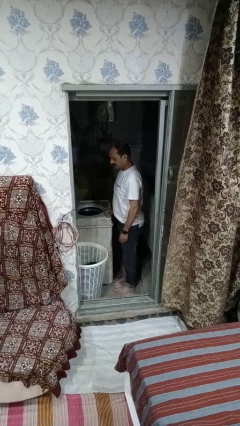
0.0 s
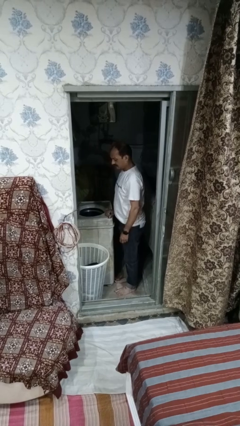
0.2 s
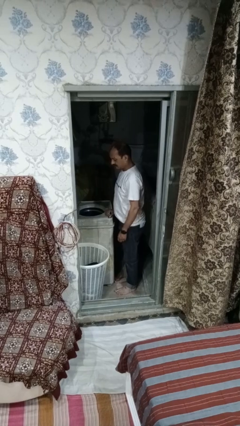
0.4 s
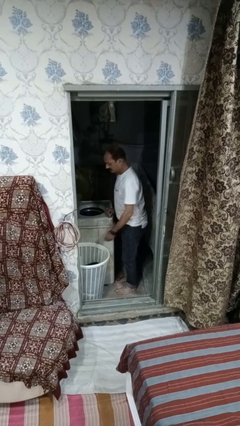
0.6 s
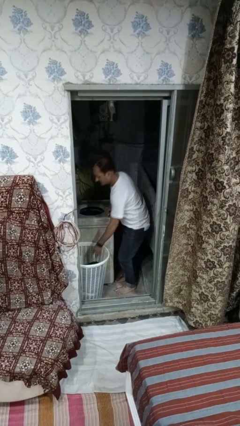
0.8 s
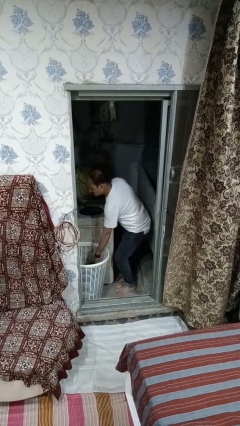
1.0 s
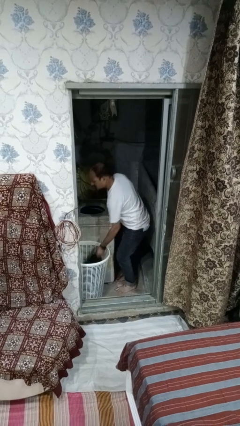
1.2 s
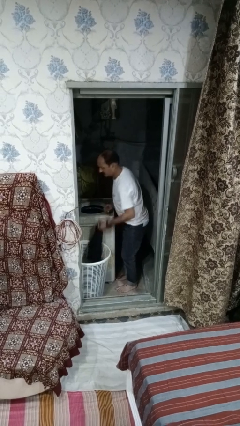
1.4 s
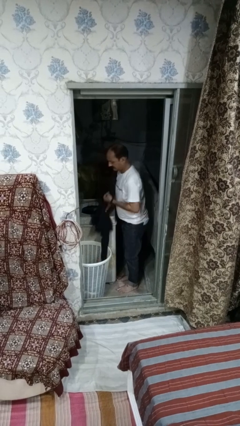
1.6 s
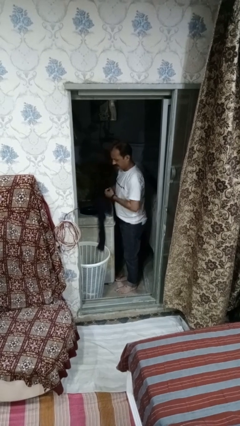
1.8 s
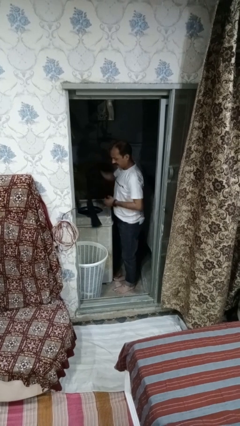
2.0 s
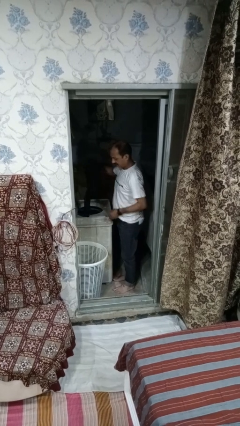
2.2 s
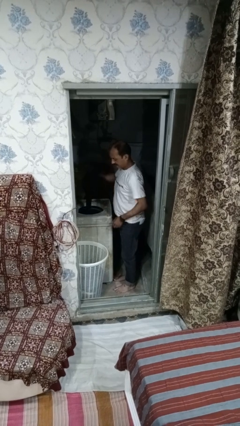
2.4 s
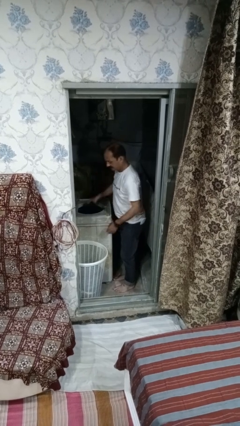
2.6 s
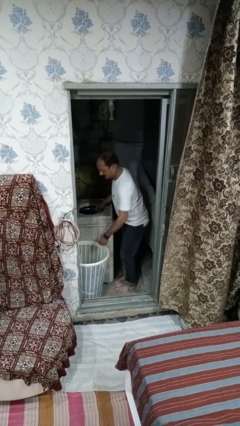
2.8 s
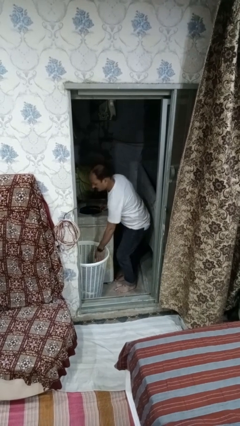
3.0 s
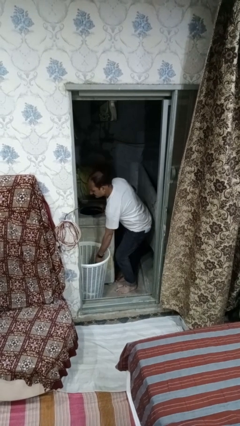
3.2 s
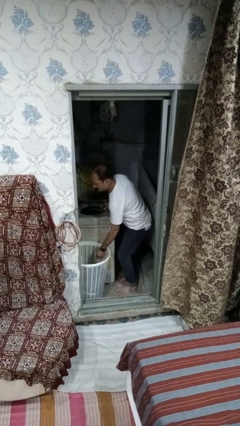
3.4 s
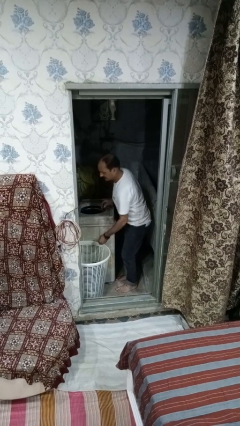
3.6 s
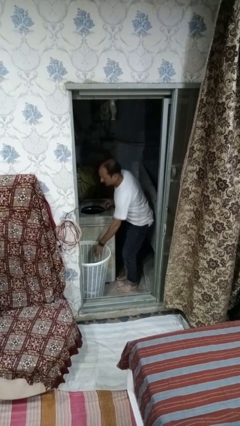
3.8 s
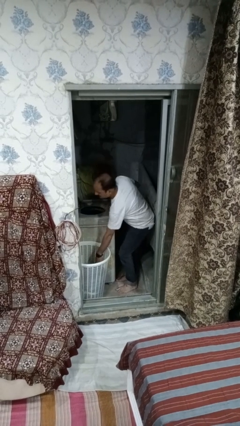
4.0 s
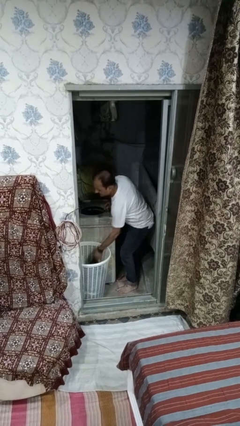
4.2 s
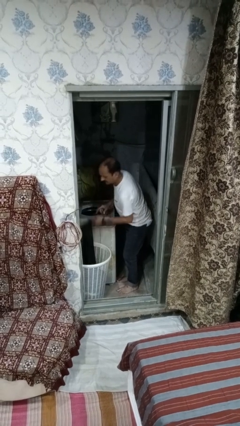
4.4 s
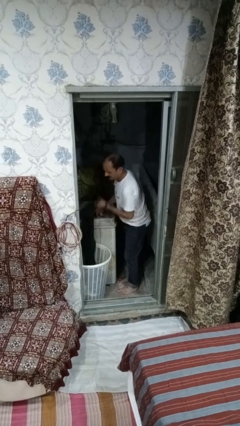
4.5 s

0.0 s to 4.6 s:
person loads dryer

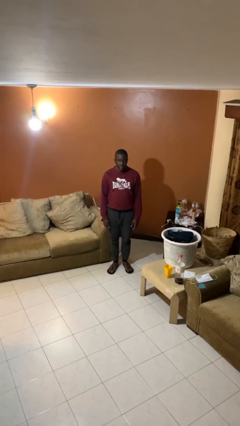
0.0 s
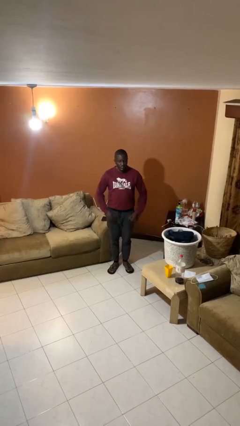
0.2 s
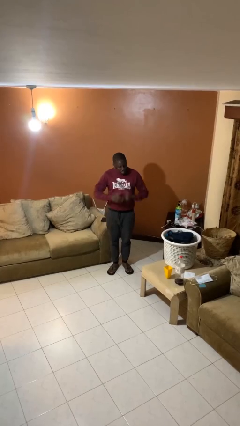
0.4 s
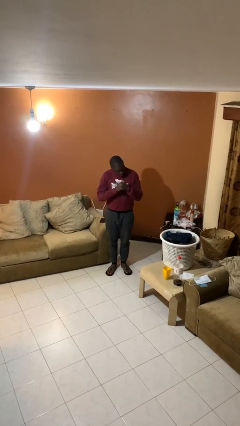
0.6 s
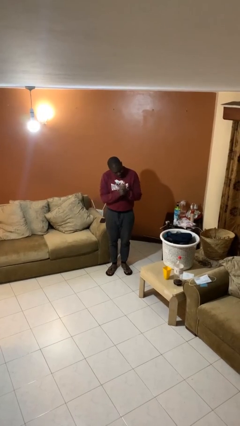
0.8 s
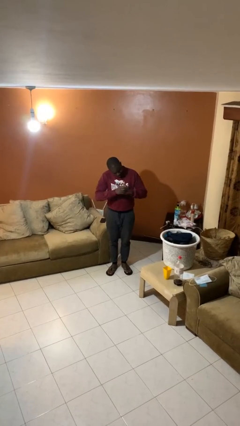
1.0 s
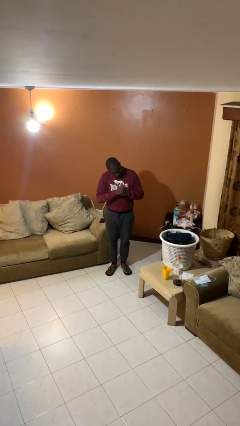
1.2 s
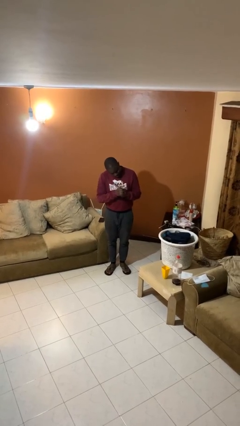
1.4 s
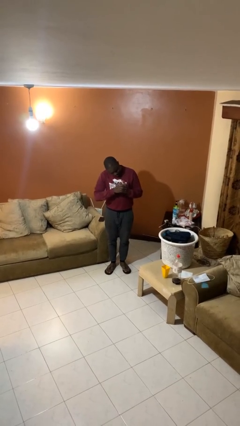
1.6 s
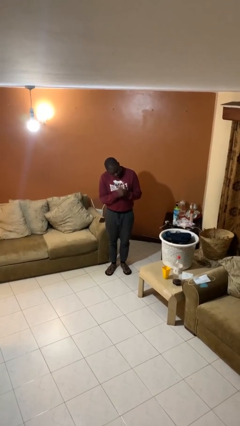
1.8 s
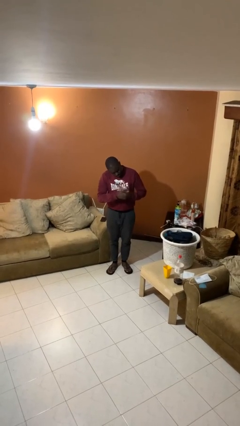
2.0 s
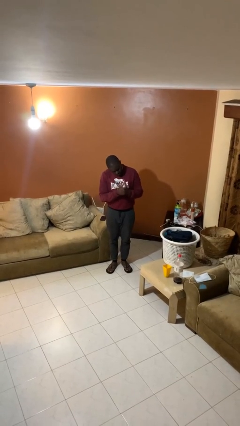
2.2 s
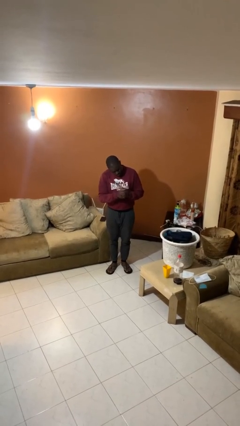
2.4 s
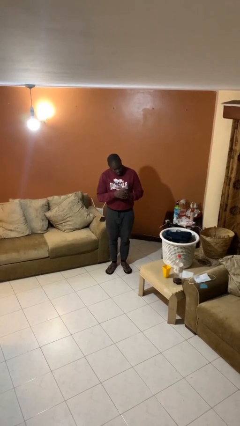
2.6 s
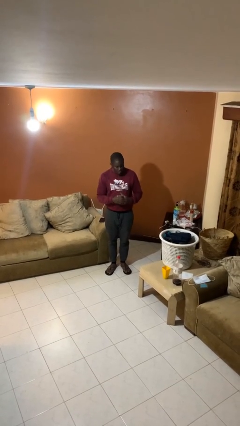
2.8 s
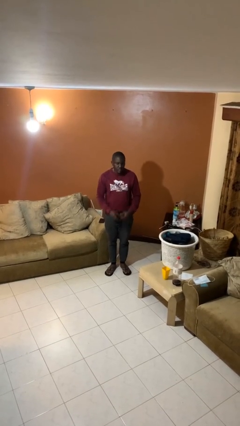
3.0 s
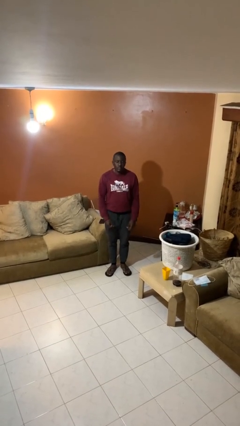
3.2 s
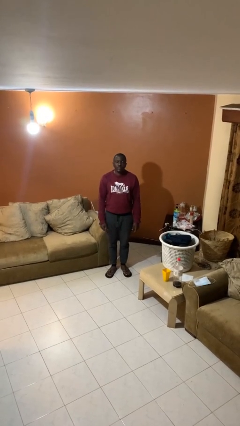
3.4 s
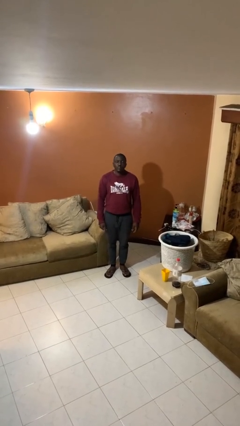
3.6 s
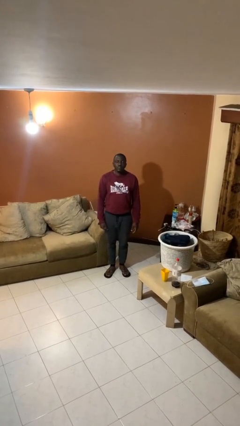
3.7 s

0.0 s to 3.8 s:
person cracks knuckles

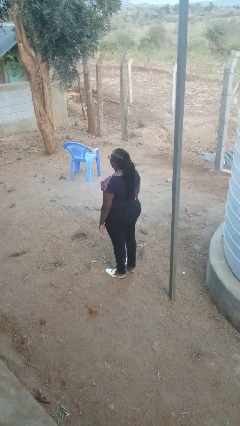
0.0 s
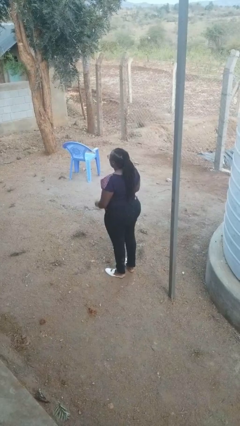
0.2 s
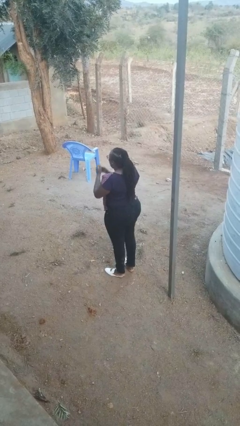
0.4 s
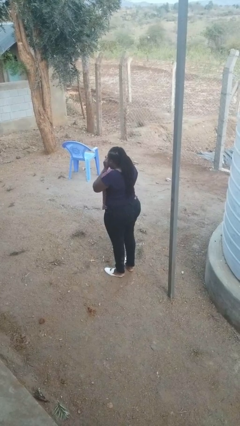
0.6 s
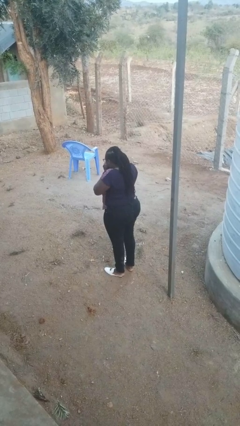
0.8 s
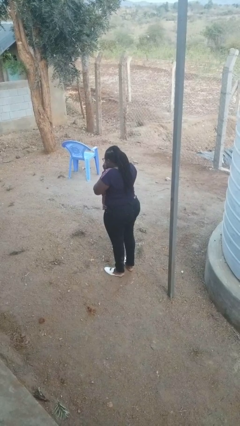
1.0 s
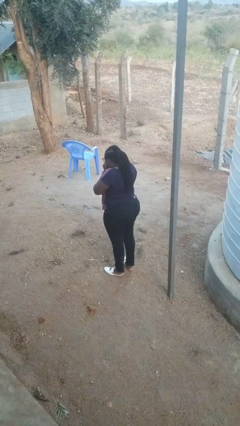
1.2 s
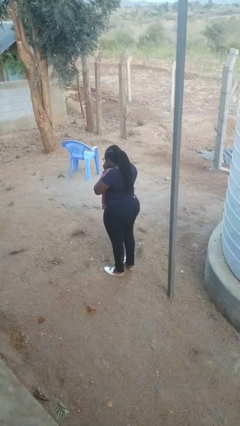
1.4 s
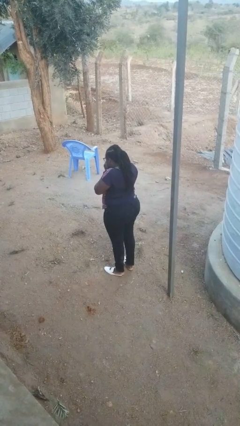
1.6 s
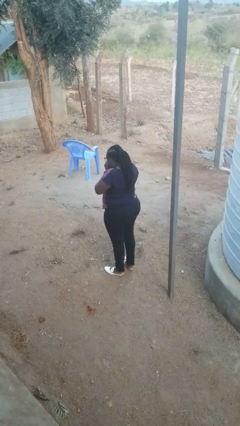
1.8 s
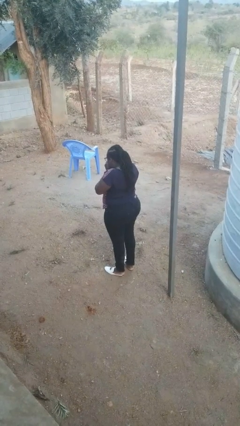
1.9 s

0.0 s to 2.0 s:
person sneezes into hand

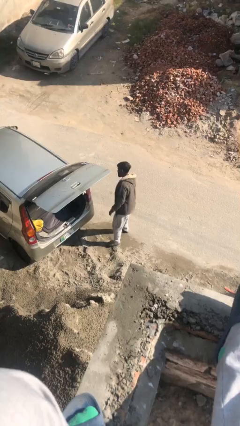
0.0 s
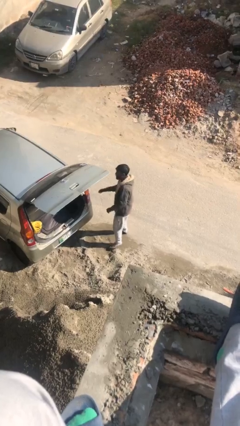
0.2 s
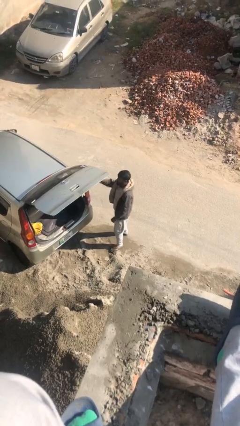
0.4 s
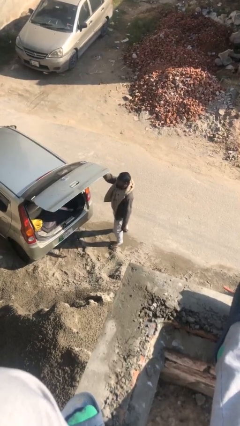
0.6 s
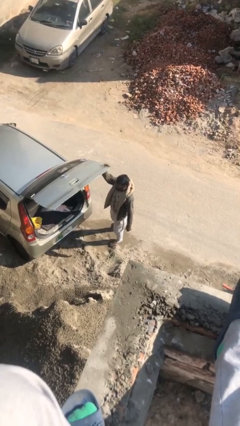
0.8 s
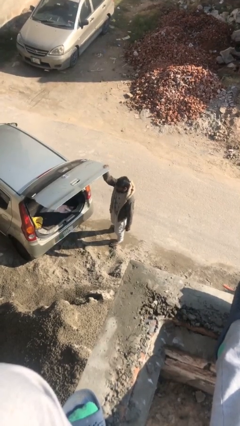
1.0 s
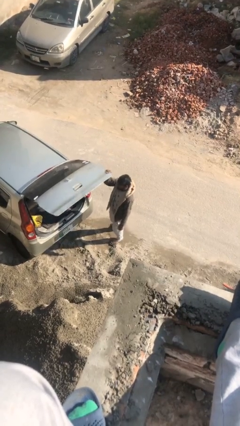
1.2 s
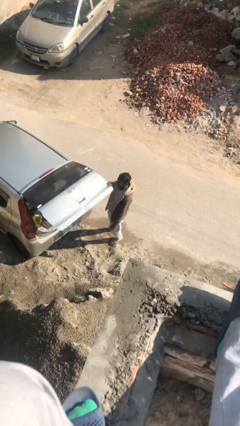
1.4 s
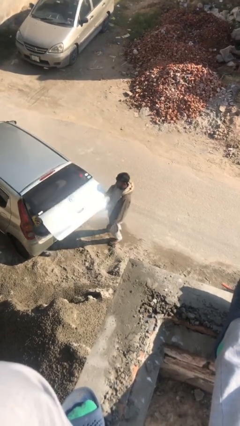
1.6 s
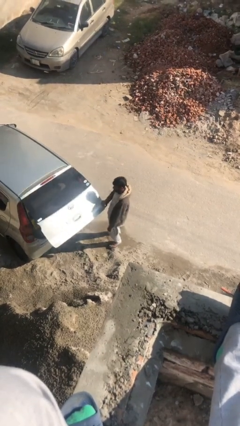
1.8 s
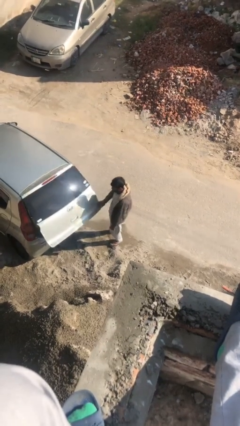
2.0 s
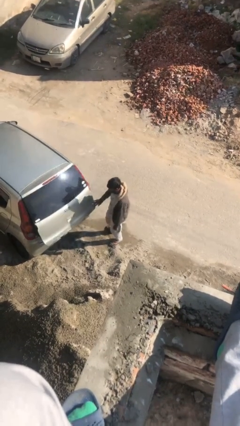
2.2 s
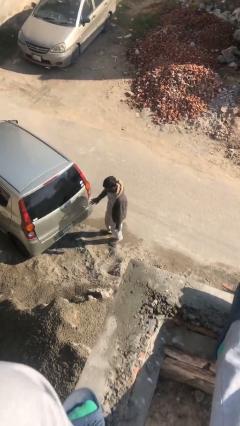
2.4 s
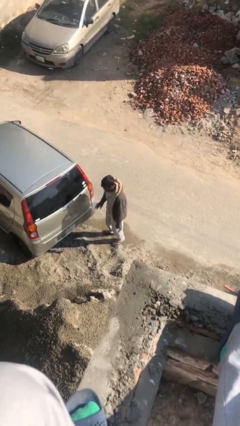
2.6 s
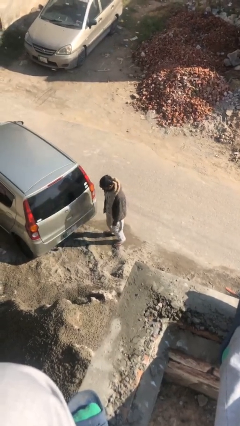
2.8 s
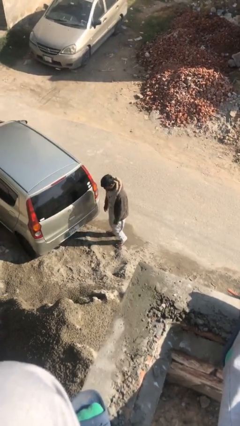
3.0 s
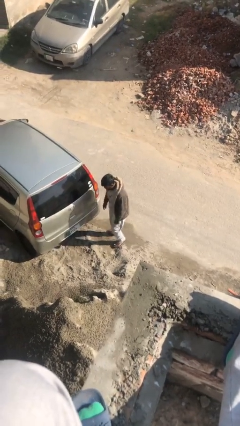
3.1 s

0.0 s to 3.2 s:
person closes car trunk

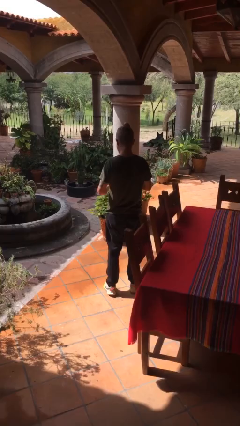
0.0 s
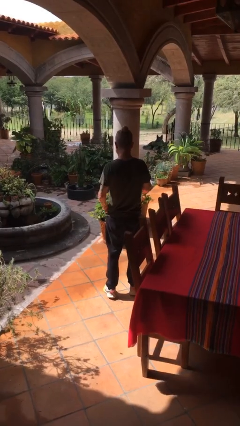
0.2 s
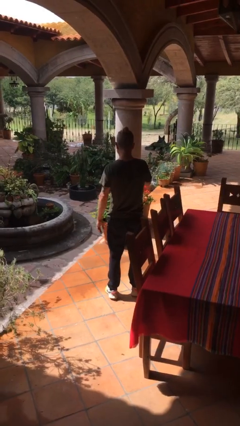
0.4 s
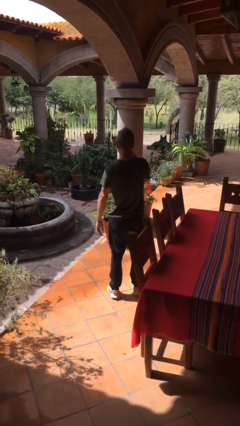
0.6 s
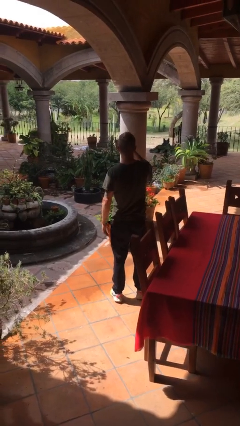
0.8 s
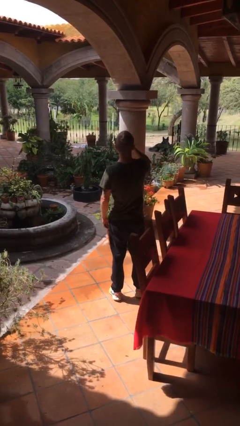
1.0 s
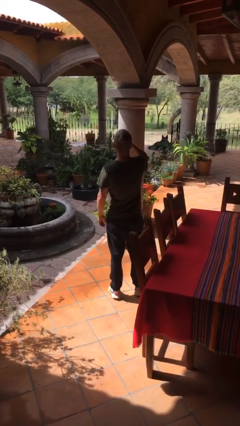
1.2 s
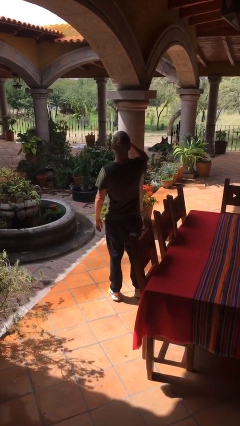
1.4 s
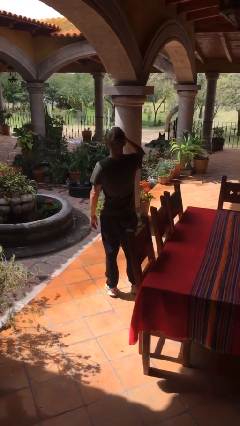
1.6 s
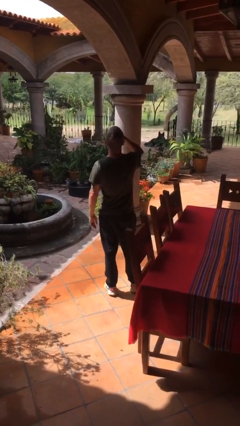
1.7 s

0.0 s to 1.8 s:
person drinks from beverage can

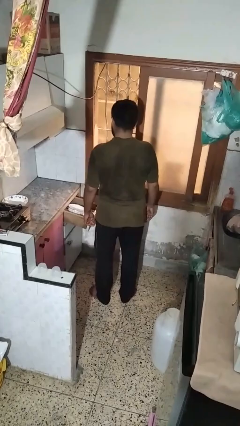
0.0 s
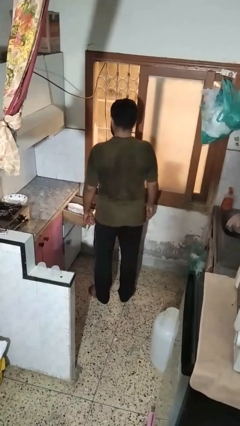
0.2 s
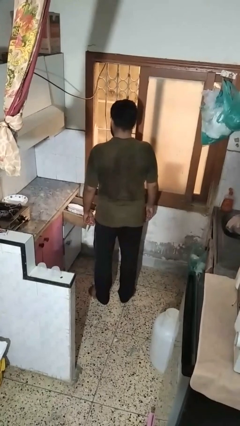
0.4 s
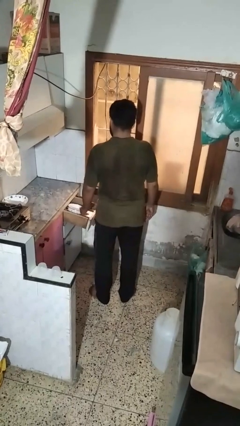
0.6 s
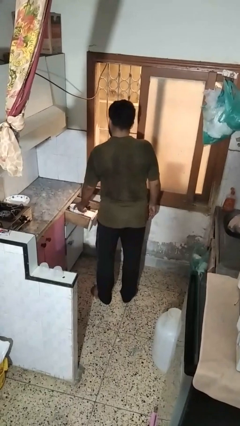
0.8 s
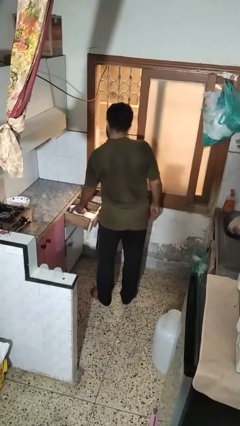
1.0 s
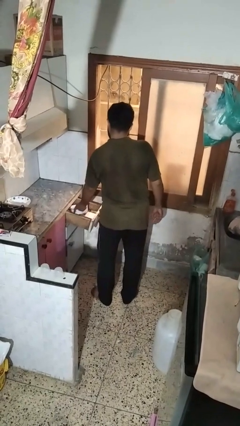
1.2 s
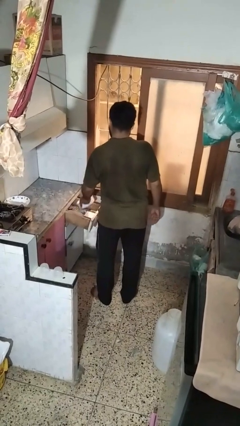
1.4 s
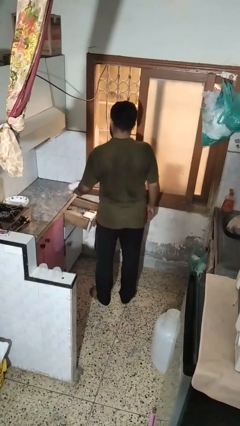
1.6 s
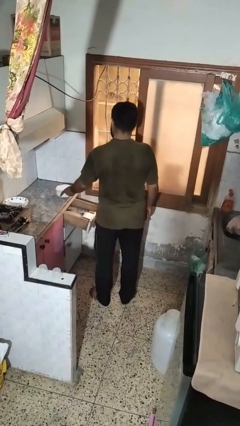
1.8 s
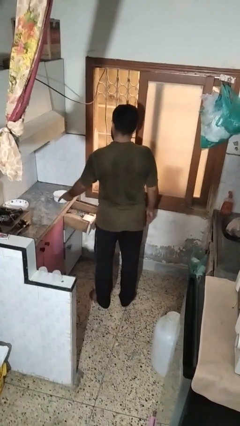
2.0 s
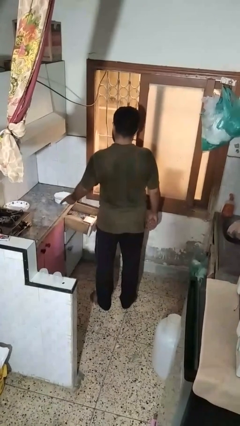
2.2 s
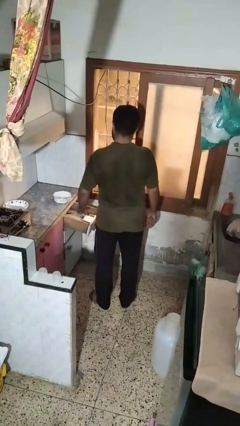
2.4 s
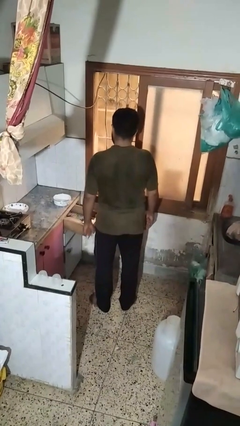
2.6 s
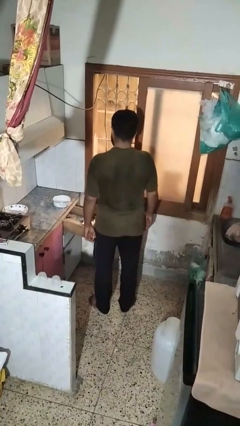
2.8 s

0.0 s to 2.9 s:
person takes object from kitchen drawer
